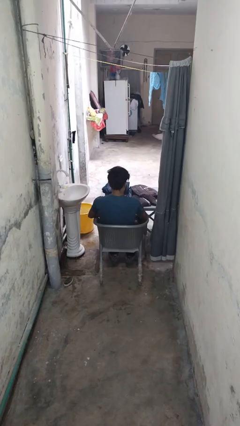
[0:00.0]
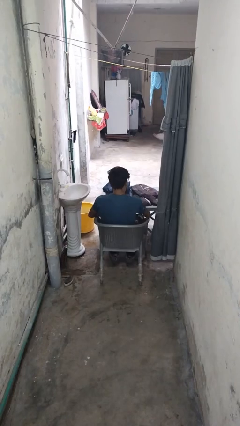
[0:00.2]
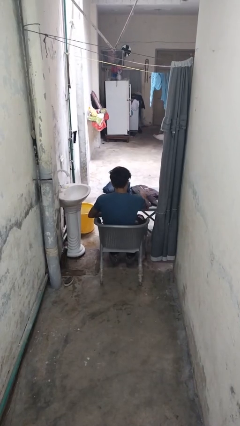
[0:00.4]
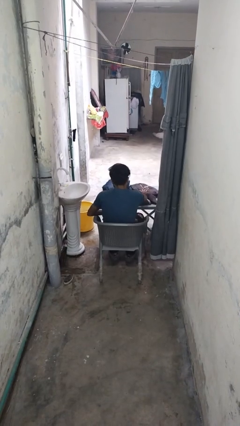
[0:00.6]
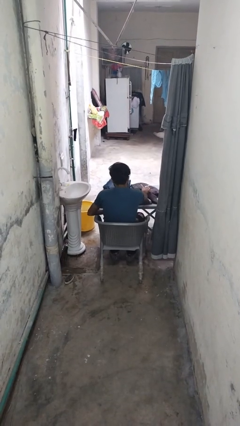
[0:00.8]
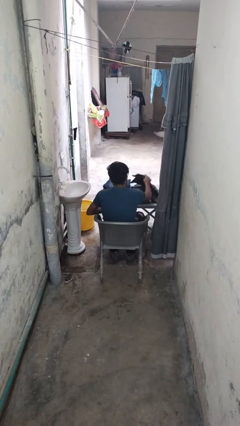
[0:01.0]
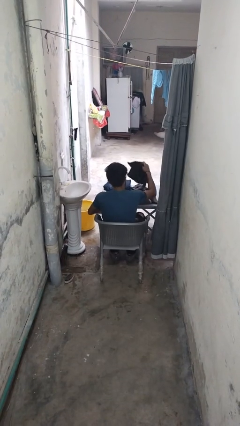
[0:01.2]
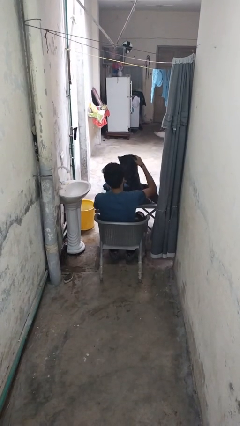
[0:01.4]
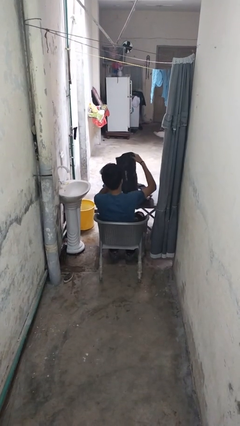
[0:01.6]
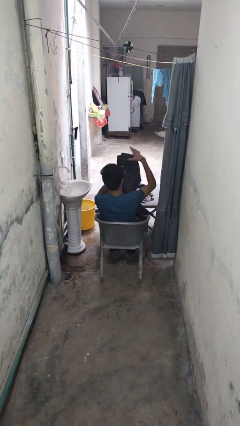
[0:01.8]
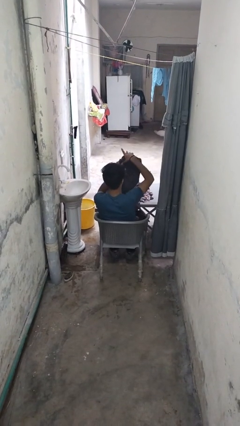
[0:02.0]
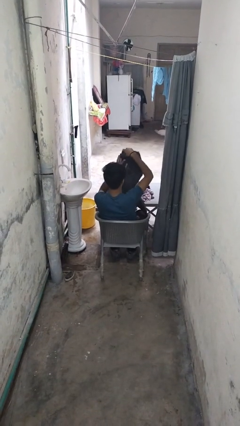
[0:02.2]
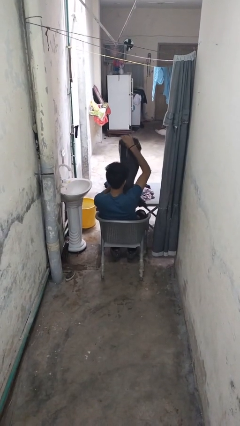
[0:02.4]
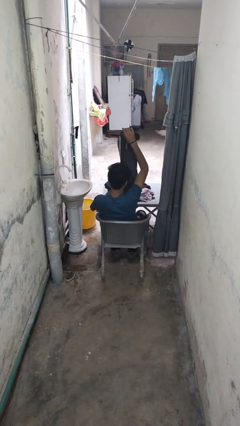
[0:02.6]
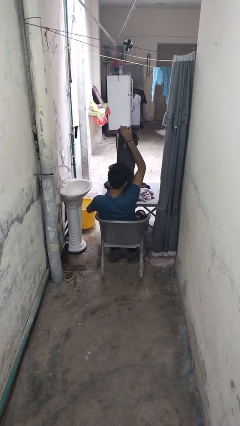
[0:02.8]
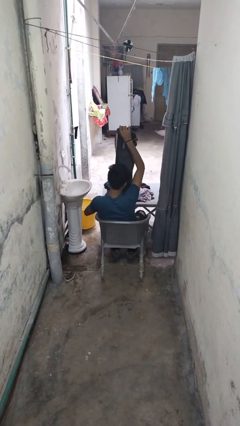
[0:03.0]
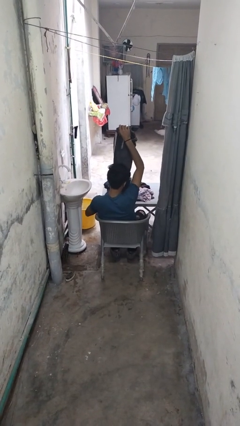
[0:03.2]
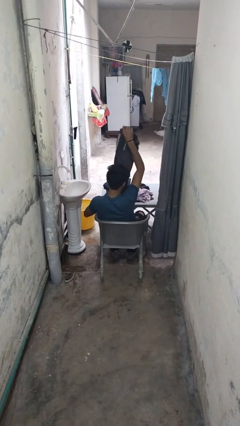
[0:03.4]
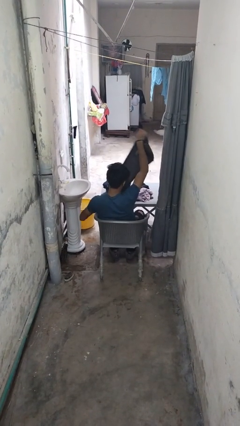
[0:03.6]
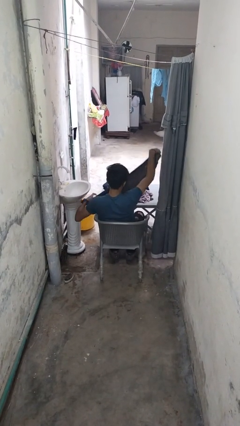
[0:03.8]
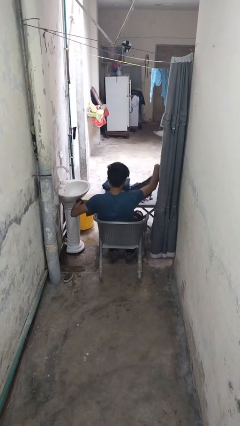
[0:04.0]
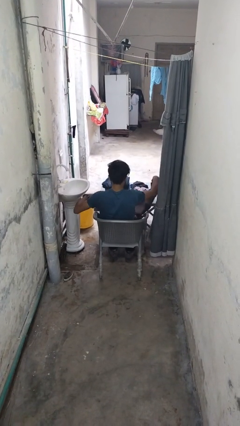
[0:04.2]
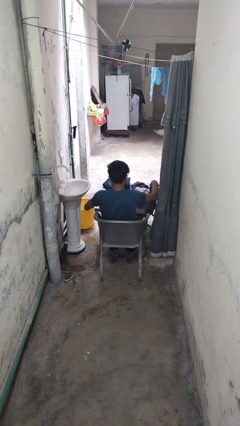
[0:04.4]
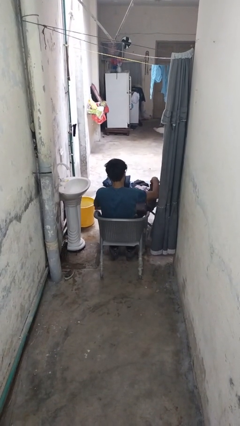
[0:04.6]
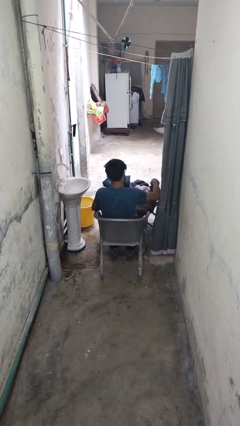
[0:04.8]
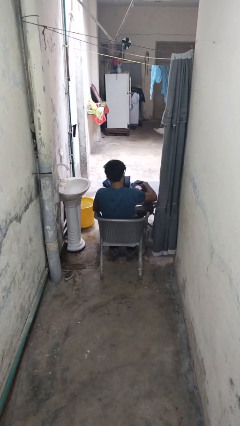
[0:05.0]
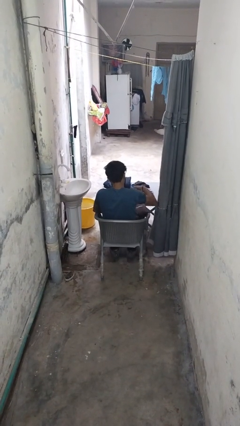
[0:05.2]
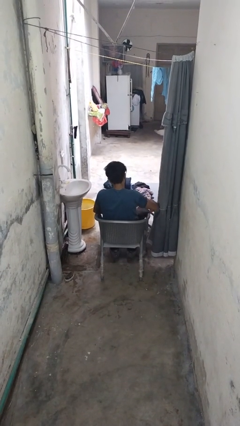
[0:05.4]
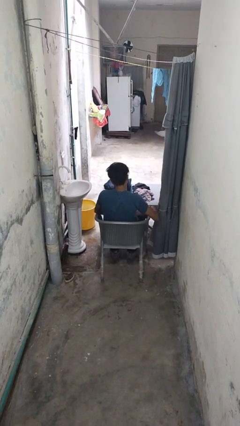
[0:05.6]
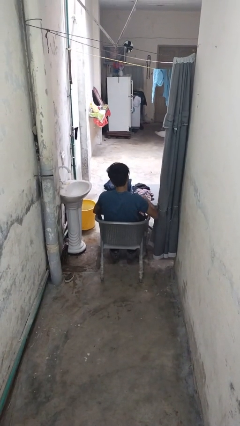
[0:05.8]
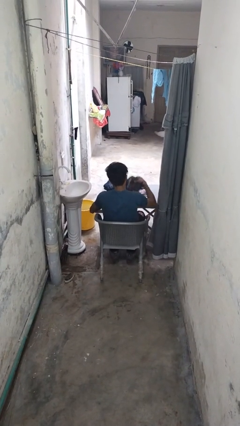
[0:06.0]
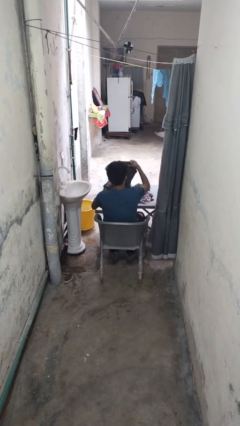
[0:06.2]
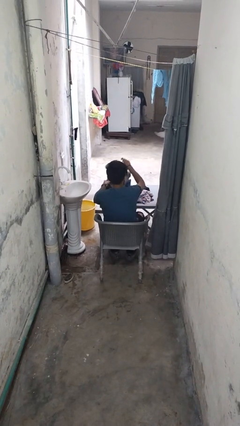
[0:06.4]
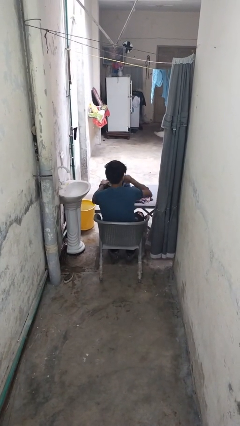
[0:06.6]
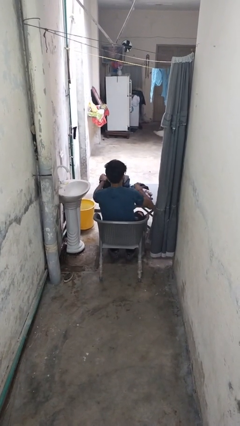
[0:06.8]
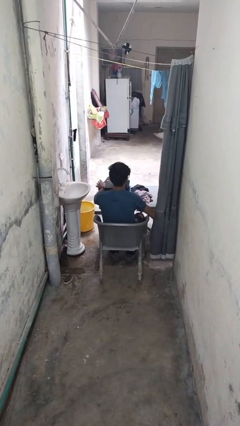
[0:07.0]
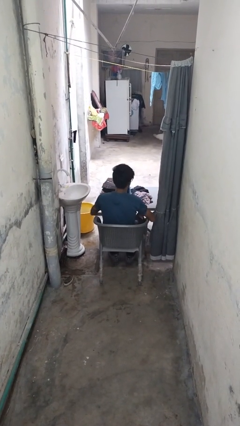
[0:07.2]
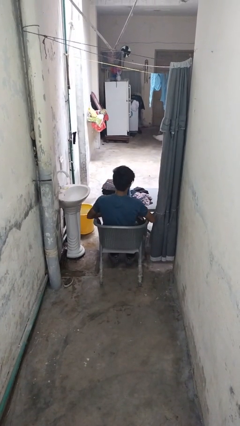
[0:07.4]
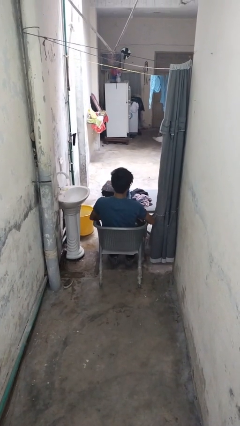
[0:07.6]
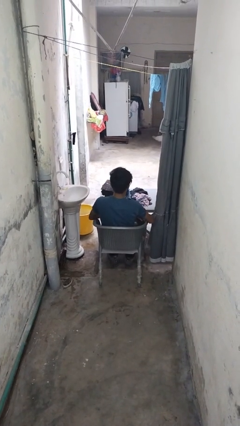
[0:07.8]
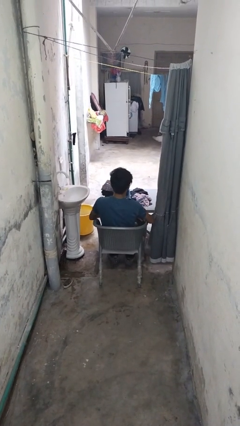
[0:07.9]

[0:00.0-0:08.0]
person folds pants

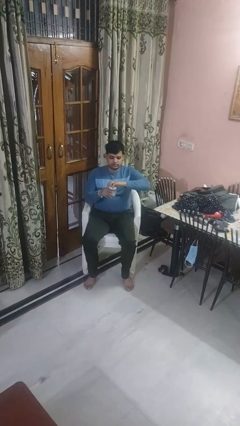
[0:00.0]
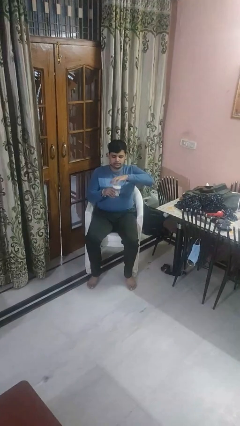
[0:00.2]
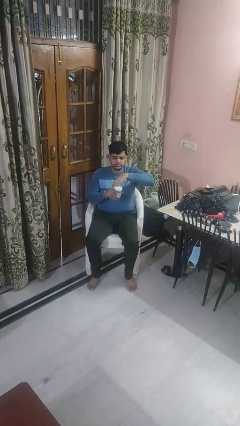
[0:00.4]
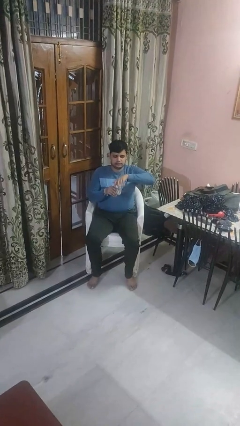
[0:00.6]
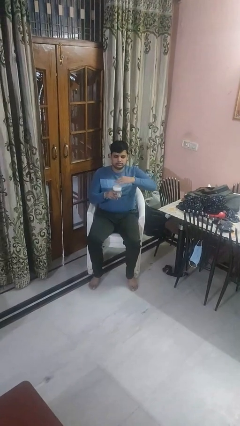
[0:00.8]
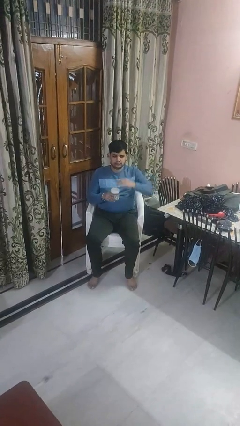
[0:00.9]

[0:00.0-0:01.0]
person closes jar

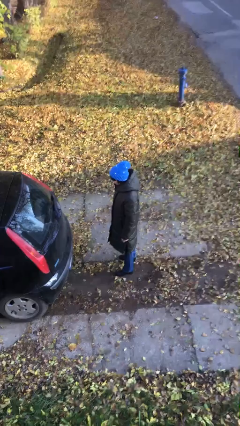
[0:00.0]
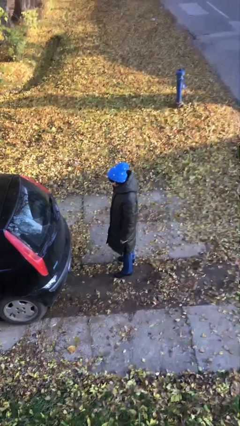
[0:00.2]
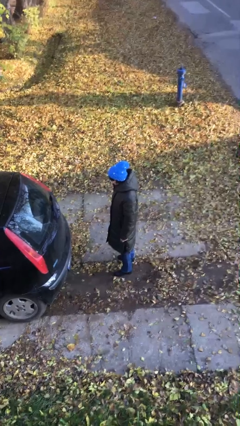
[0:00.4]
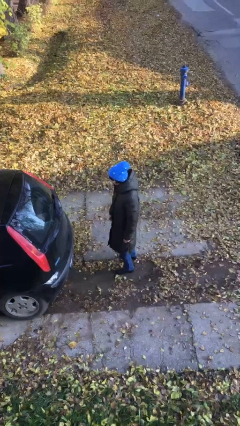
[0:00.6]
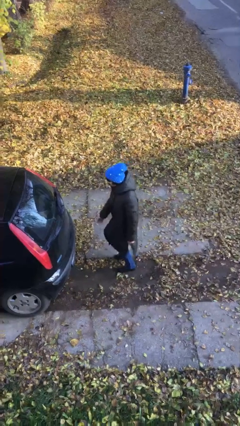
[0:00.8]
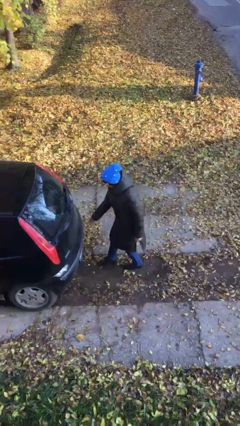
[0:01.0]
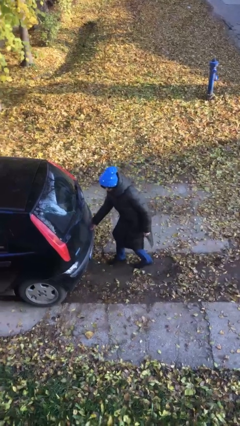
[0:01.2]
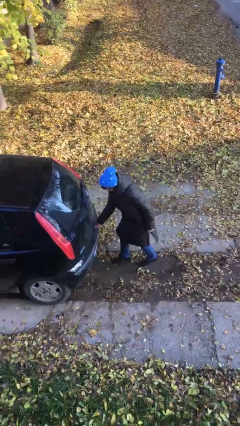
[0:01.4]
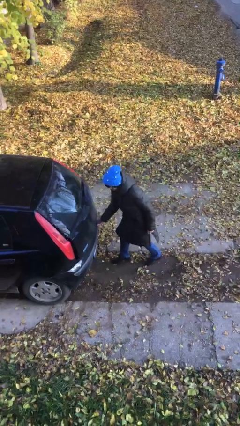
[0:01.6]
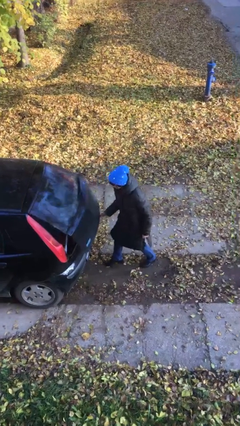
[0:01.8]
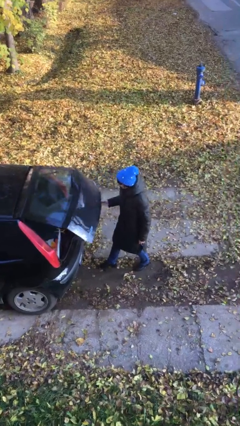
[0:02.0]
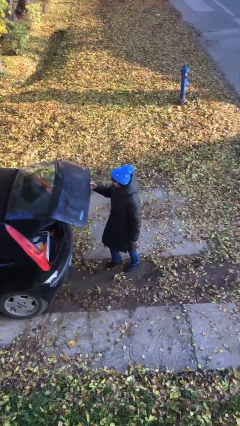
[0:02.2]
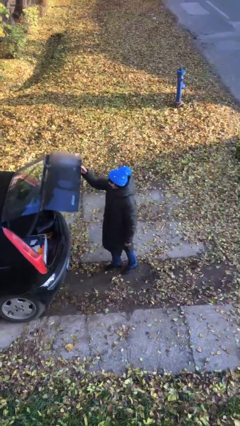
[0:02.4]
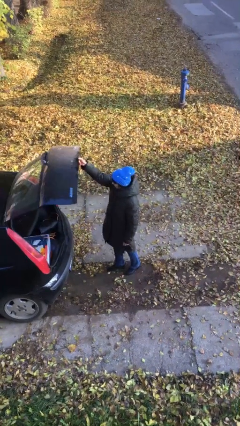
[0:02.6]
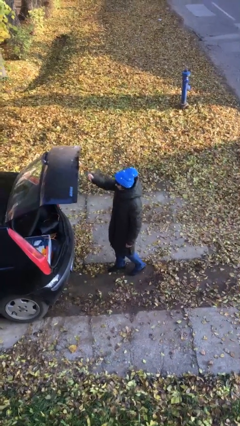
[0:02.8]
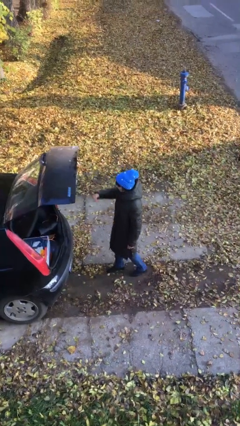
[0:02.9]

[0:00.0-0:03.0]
person opens car trunk

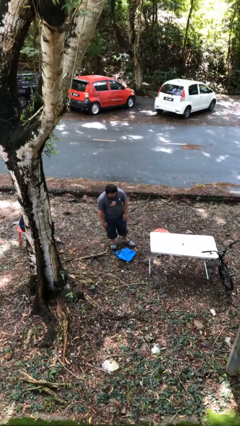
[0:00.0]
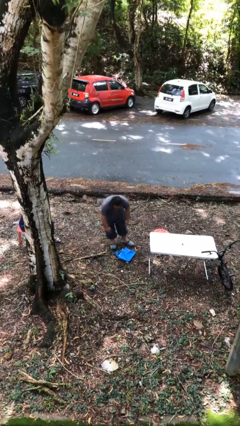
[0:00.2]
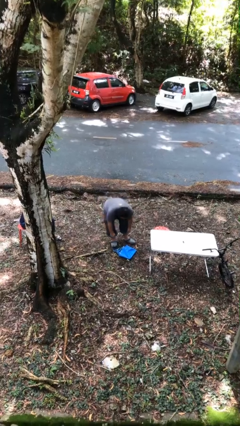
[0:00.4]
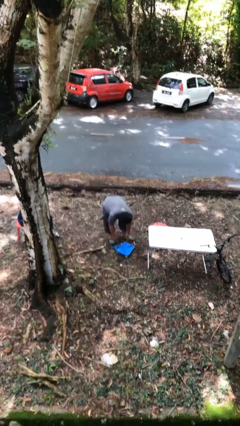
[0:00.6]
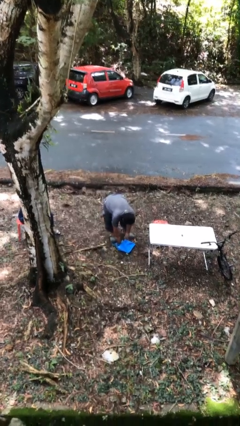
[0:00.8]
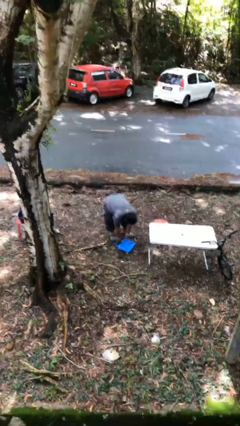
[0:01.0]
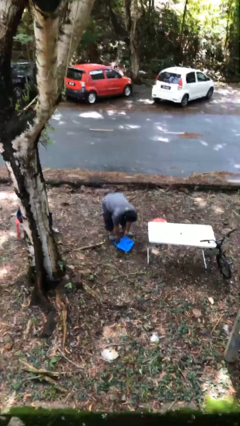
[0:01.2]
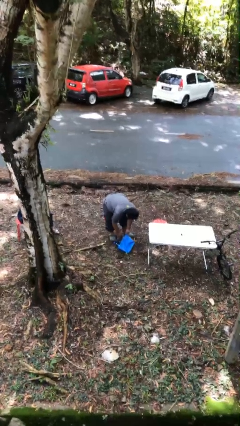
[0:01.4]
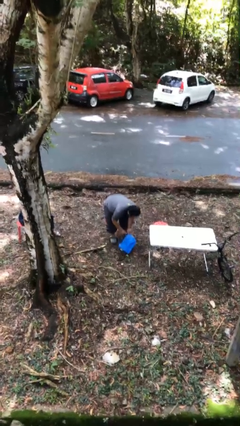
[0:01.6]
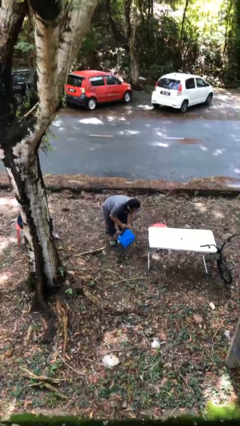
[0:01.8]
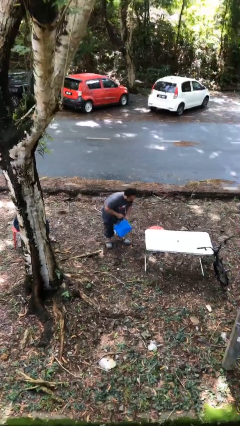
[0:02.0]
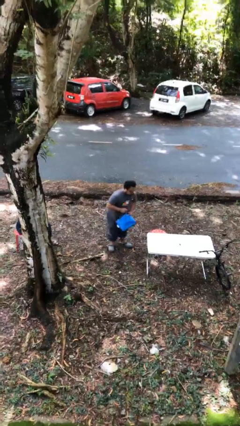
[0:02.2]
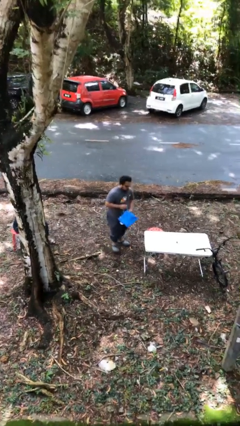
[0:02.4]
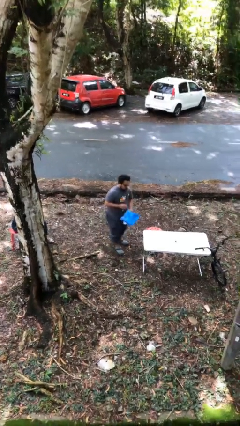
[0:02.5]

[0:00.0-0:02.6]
person picks up object from floor

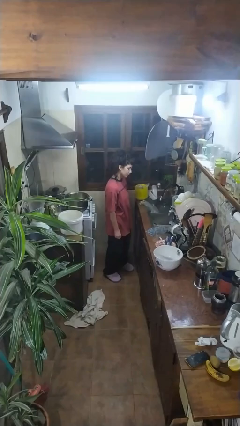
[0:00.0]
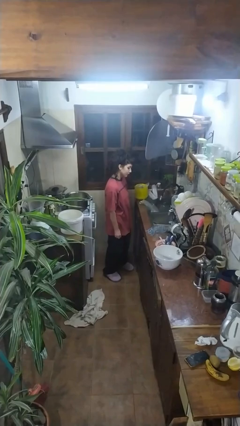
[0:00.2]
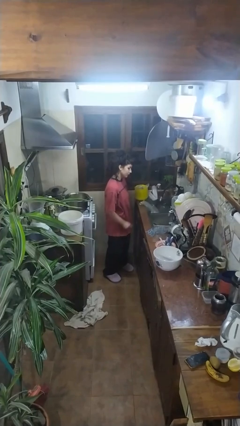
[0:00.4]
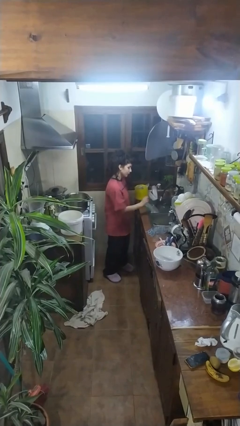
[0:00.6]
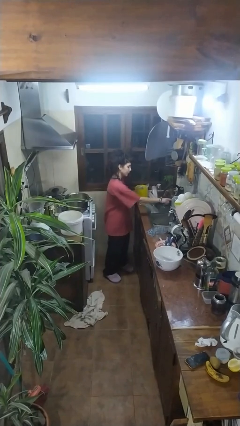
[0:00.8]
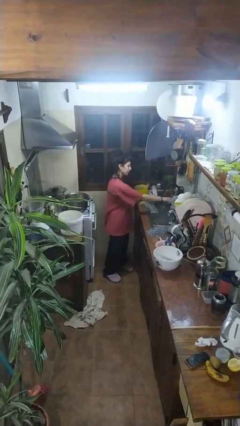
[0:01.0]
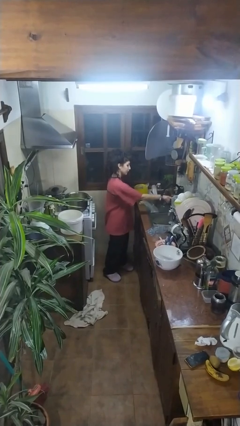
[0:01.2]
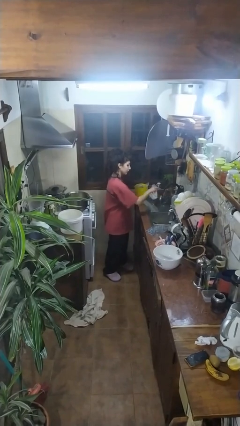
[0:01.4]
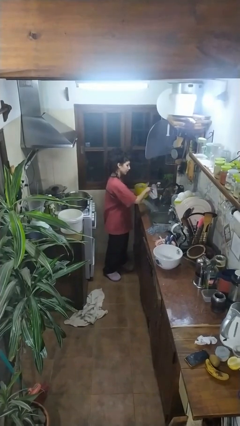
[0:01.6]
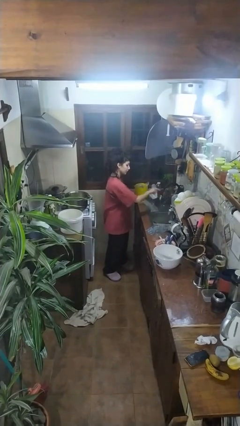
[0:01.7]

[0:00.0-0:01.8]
person turns on faucet

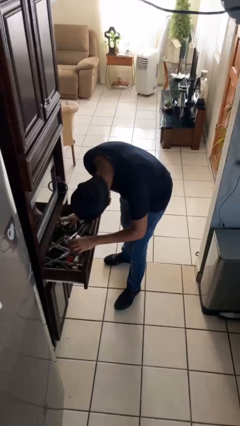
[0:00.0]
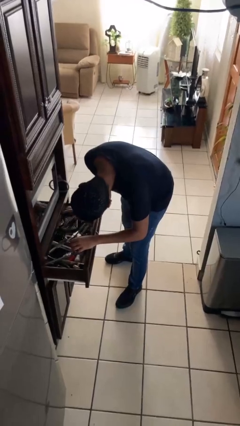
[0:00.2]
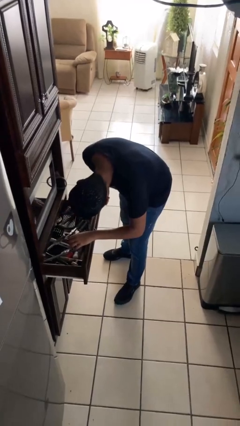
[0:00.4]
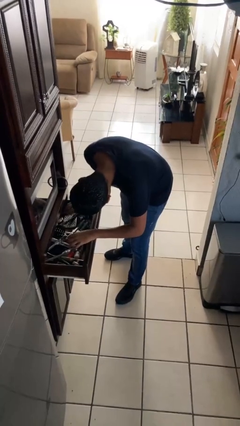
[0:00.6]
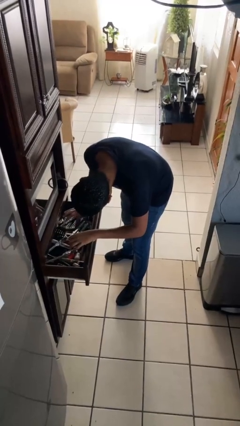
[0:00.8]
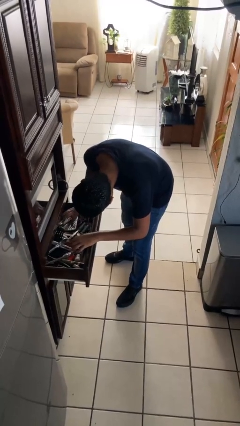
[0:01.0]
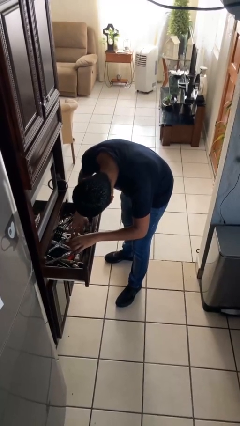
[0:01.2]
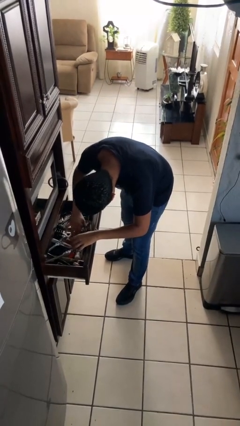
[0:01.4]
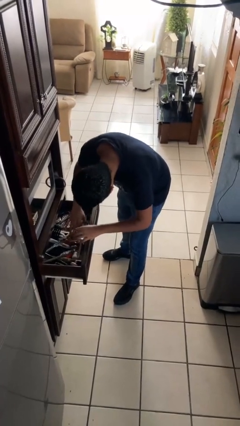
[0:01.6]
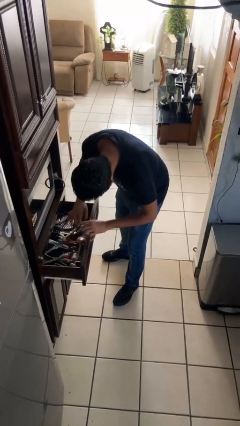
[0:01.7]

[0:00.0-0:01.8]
person searches in kitchen drawer
